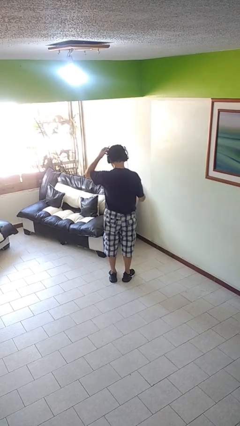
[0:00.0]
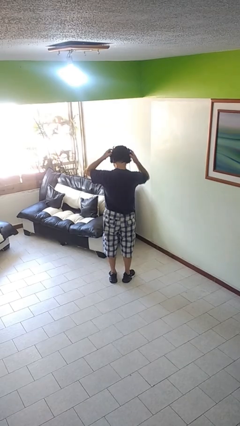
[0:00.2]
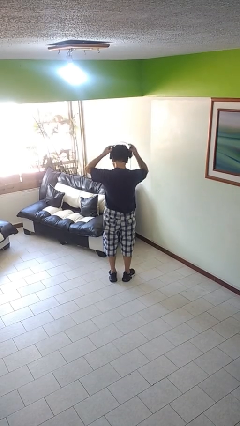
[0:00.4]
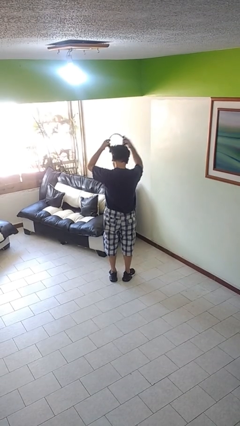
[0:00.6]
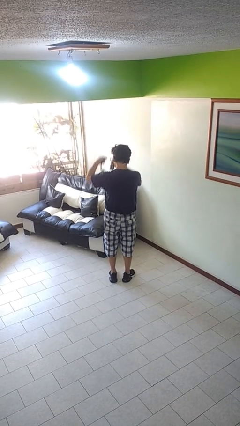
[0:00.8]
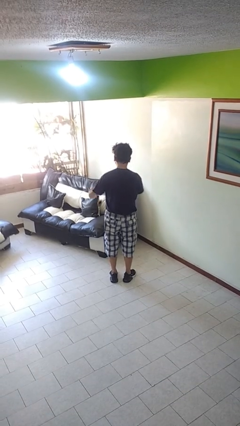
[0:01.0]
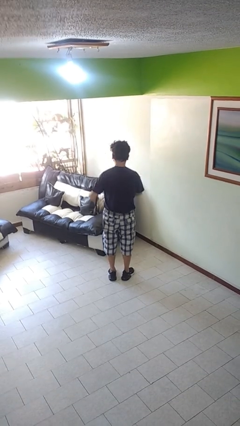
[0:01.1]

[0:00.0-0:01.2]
person takes off headphones

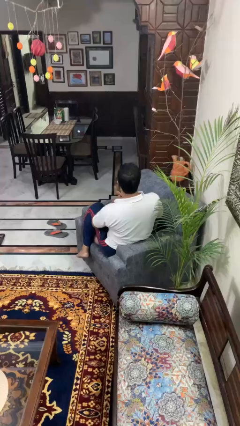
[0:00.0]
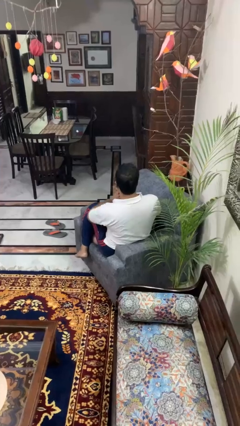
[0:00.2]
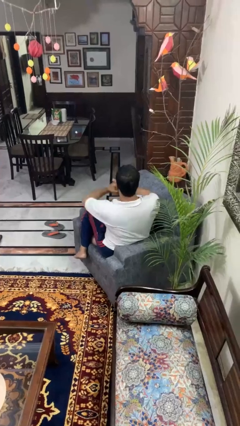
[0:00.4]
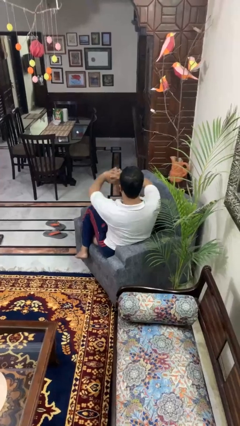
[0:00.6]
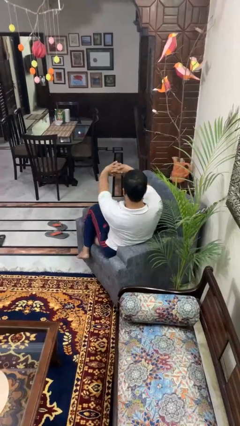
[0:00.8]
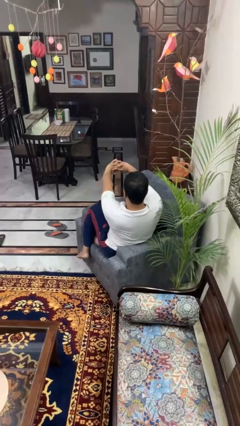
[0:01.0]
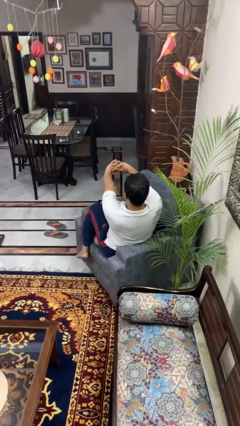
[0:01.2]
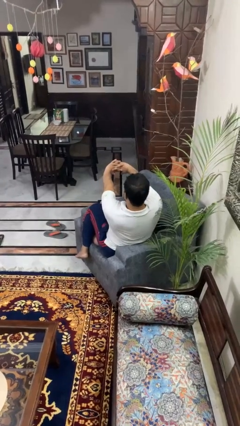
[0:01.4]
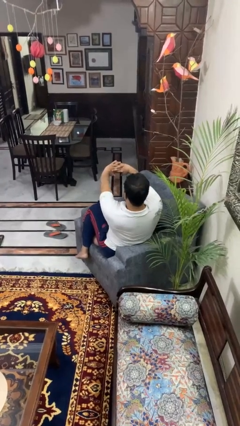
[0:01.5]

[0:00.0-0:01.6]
person cracks knuckles

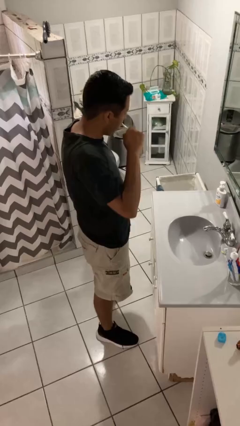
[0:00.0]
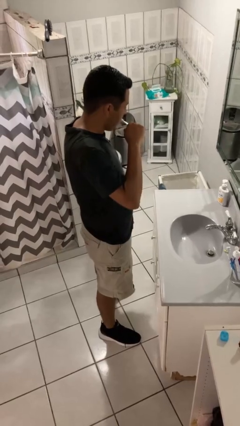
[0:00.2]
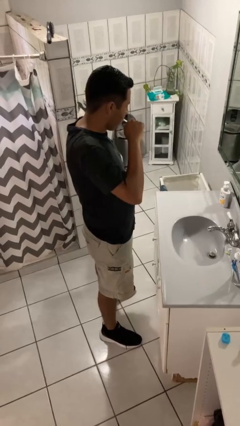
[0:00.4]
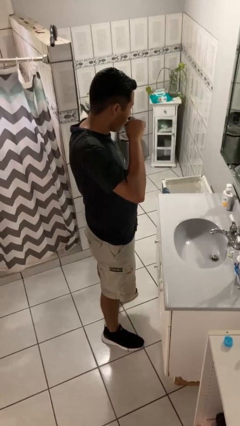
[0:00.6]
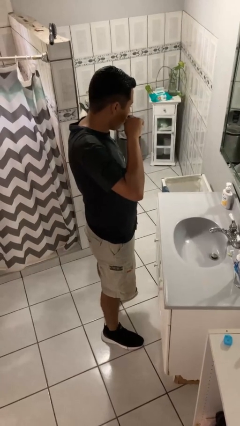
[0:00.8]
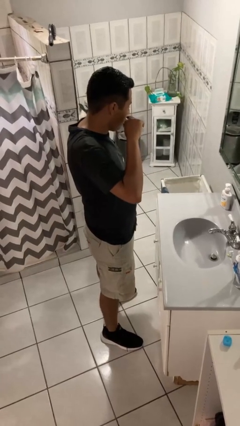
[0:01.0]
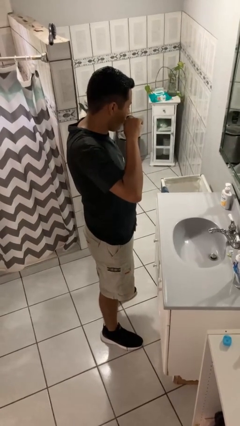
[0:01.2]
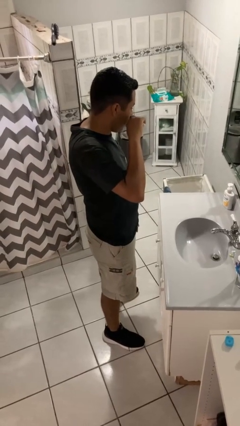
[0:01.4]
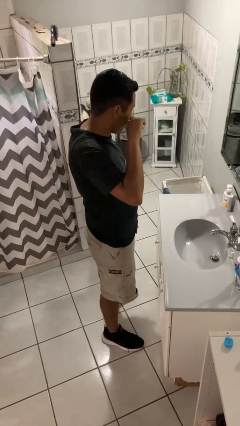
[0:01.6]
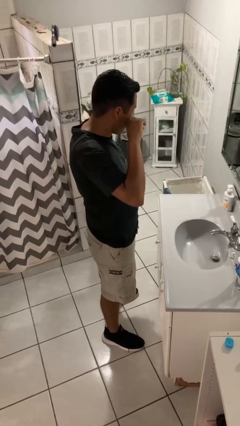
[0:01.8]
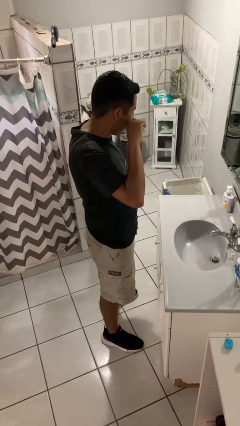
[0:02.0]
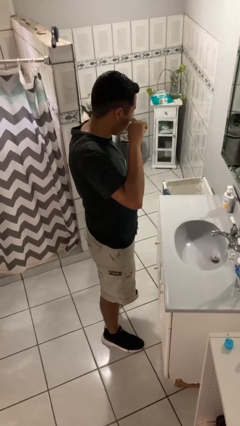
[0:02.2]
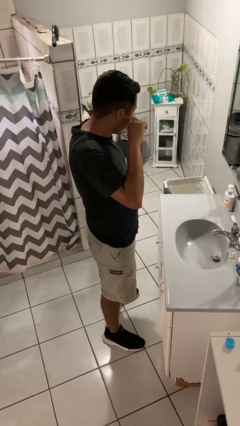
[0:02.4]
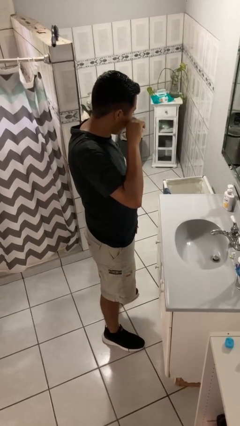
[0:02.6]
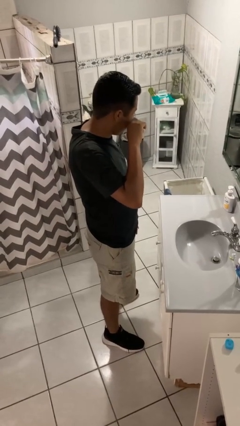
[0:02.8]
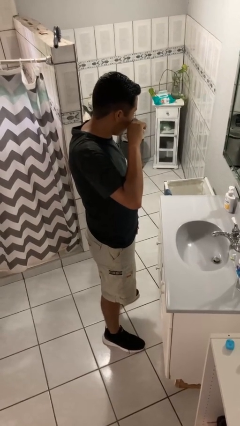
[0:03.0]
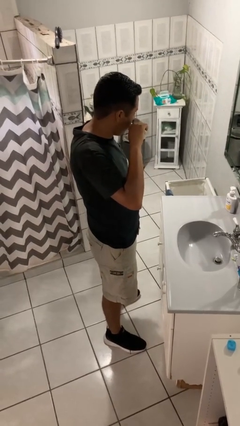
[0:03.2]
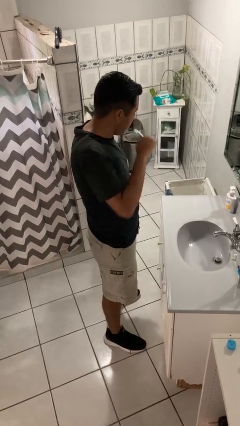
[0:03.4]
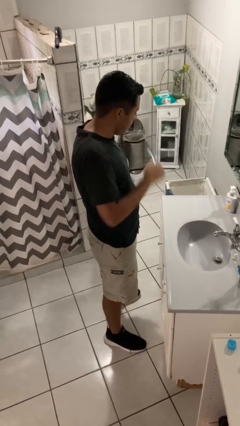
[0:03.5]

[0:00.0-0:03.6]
person brushes teeth

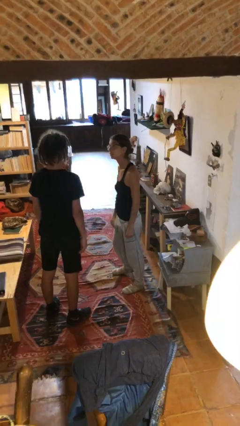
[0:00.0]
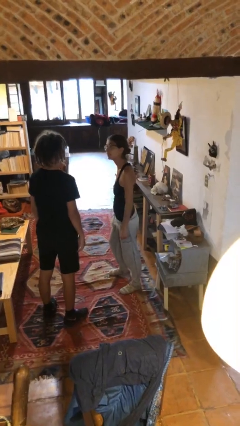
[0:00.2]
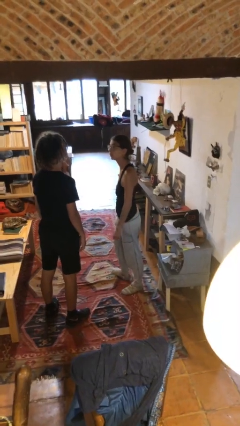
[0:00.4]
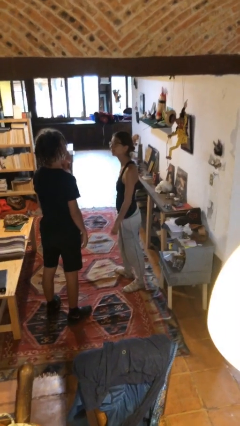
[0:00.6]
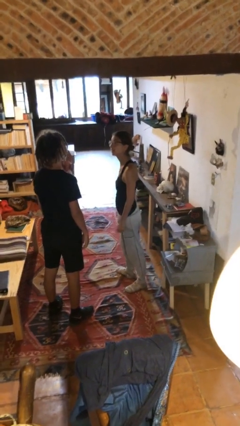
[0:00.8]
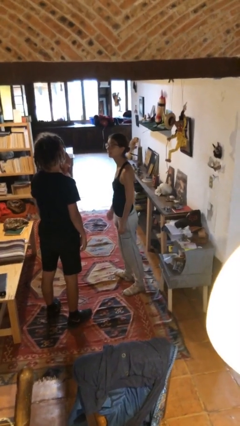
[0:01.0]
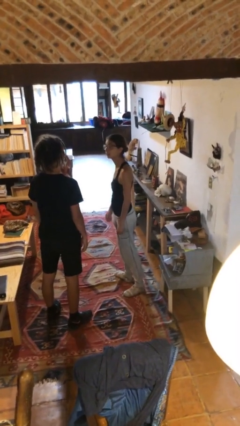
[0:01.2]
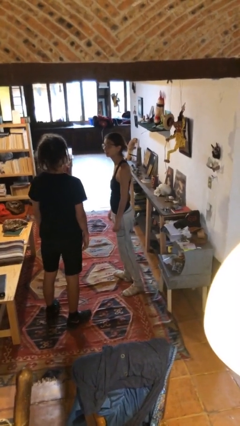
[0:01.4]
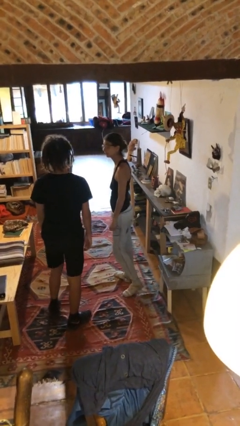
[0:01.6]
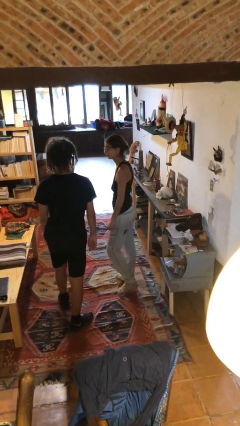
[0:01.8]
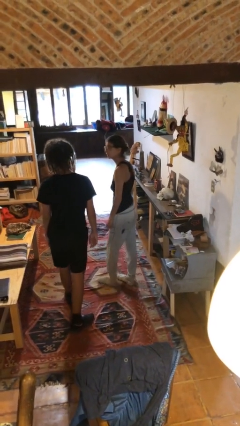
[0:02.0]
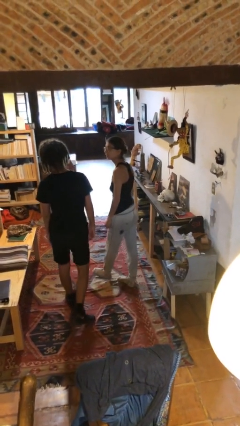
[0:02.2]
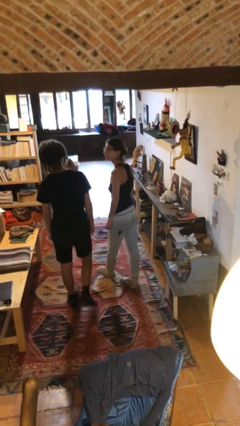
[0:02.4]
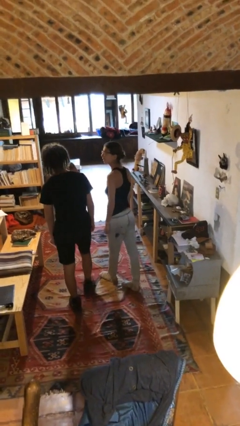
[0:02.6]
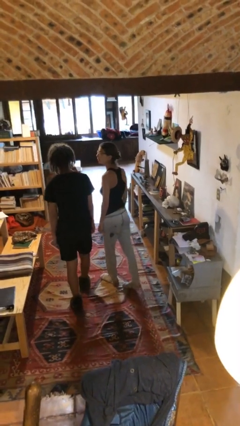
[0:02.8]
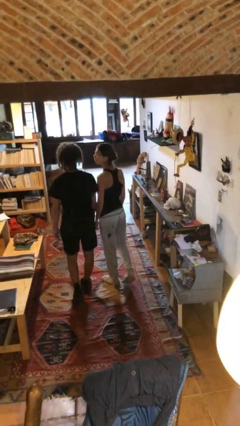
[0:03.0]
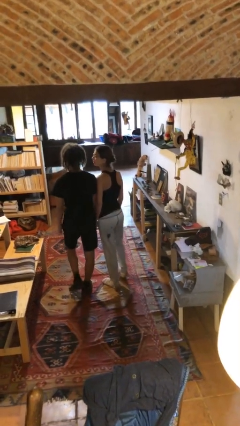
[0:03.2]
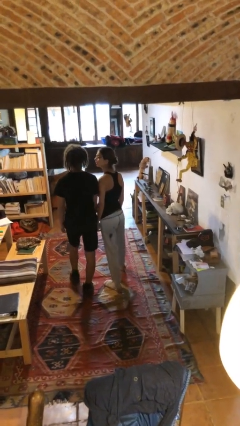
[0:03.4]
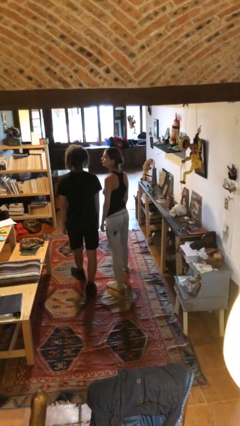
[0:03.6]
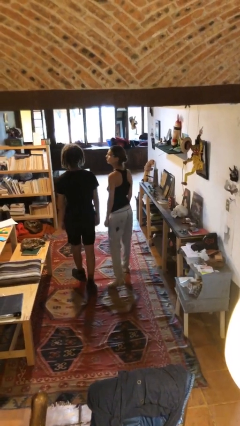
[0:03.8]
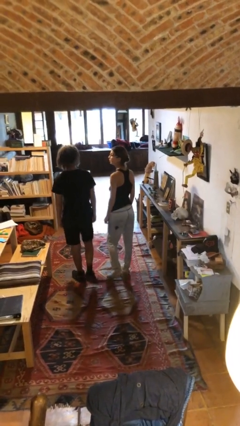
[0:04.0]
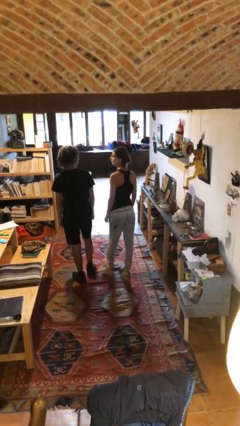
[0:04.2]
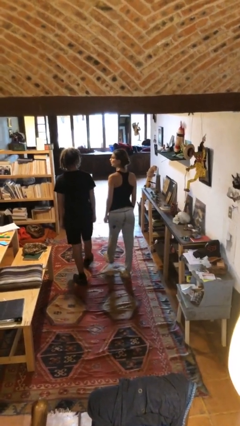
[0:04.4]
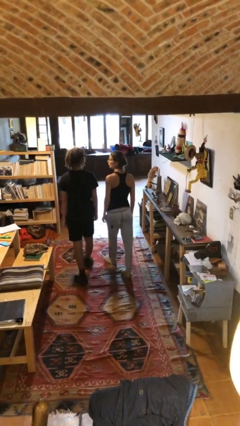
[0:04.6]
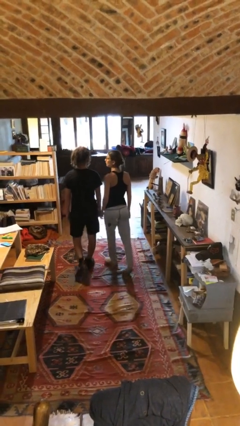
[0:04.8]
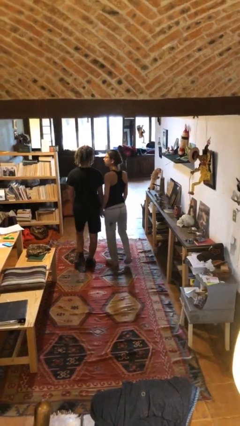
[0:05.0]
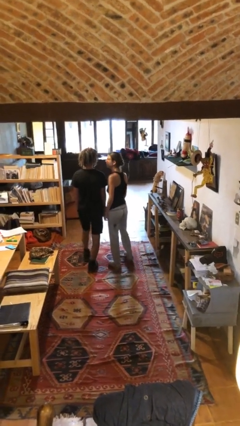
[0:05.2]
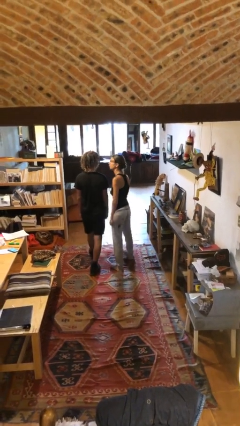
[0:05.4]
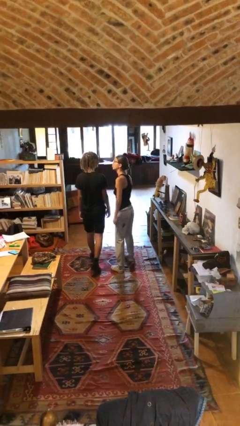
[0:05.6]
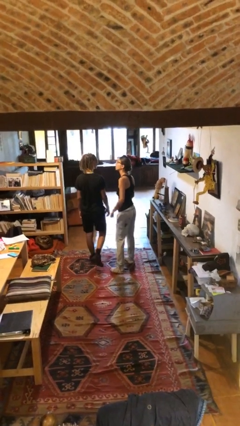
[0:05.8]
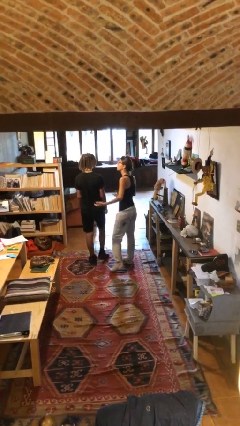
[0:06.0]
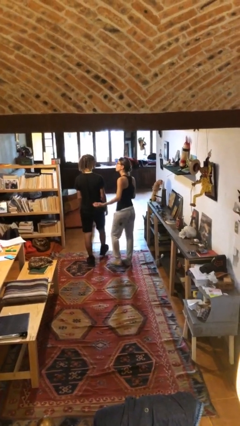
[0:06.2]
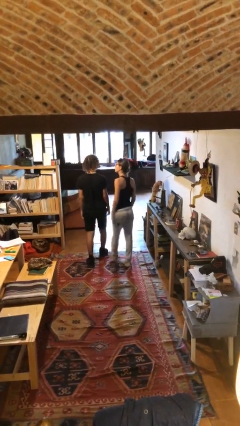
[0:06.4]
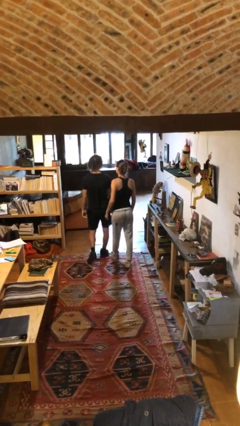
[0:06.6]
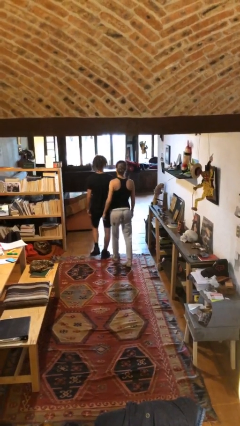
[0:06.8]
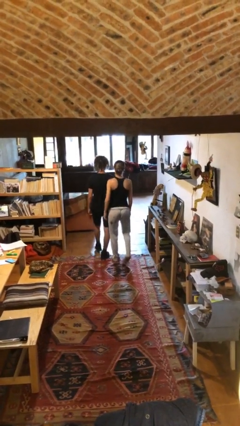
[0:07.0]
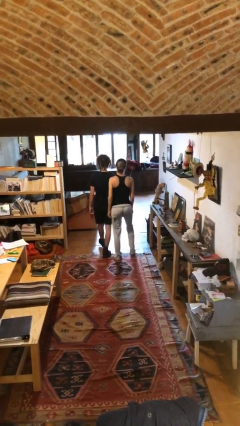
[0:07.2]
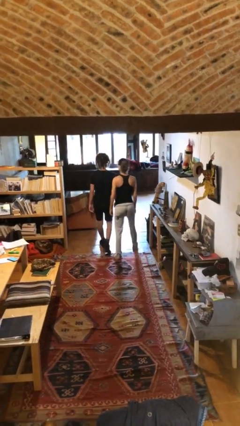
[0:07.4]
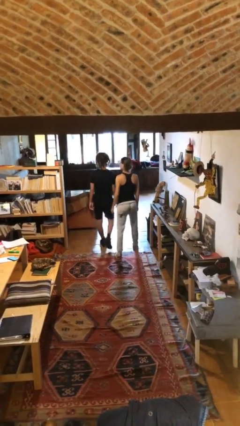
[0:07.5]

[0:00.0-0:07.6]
person talks to person

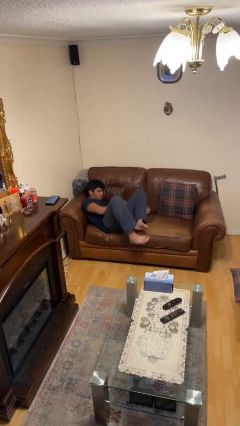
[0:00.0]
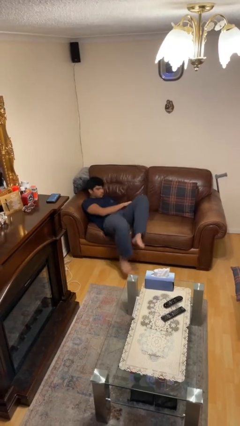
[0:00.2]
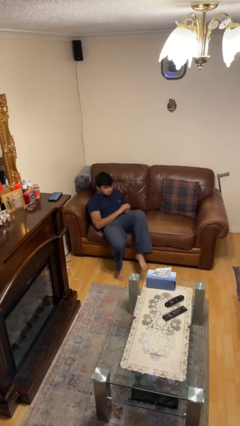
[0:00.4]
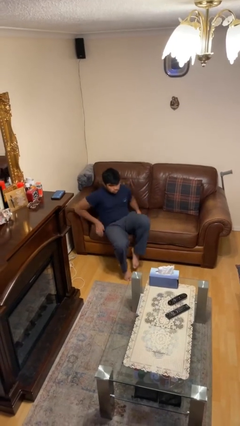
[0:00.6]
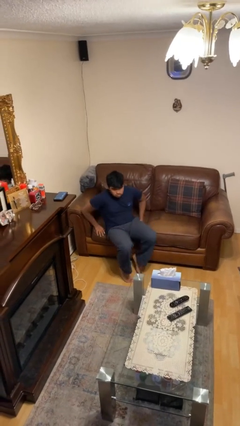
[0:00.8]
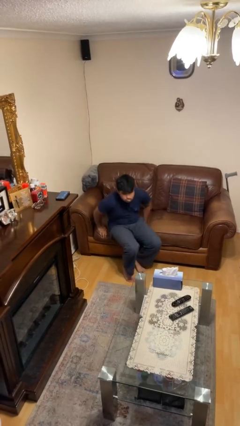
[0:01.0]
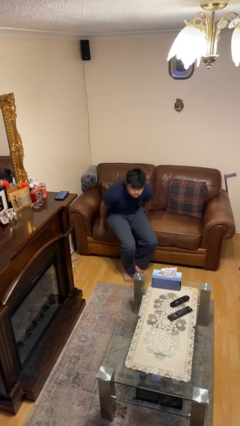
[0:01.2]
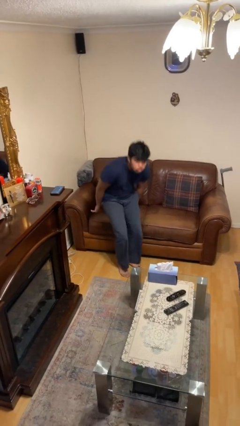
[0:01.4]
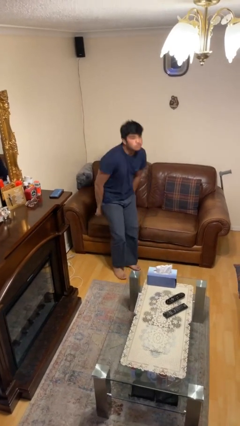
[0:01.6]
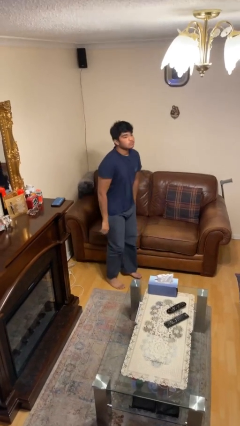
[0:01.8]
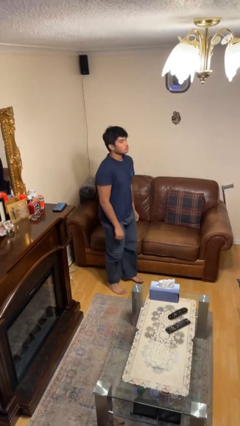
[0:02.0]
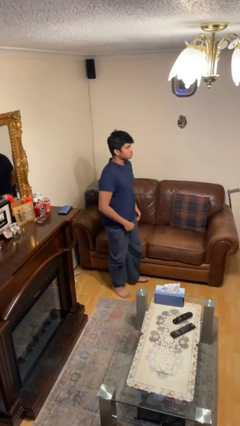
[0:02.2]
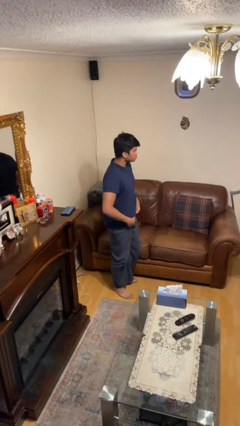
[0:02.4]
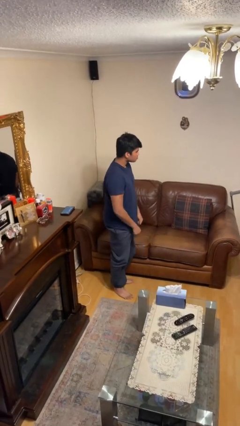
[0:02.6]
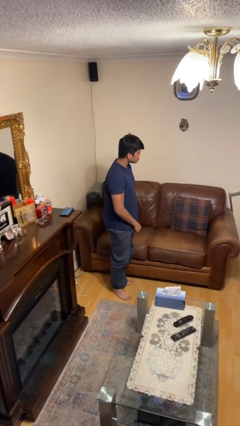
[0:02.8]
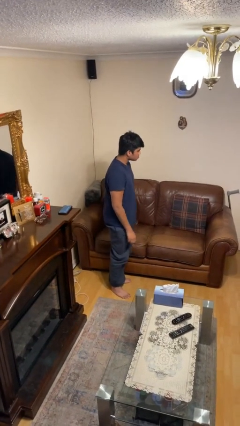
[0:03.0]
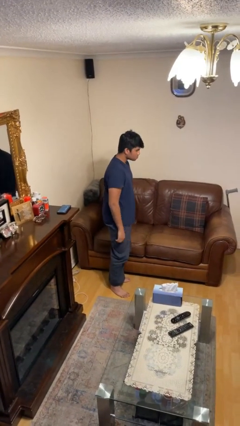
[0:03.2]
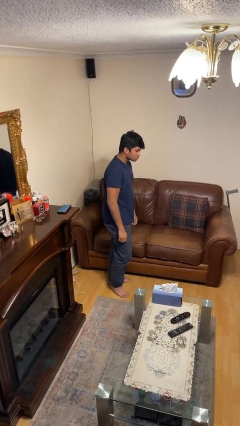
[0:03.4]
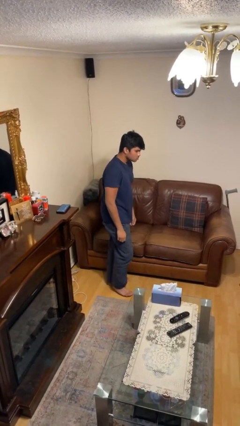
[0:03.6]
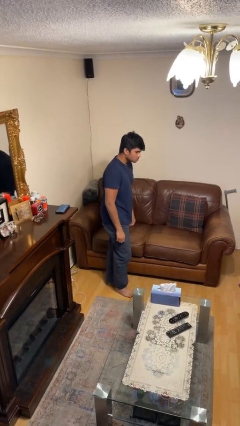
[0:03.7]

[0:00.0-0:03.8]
person stands up
